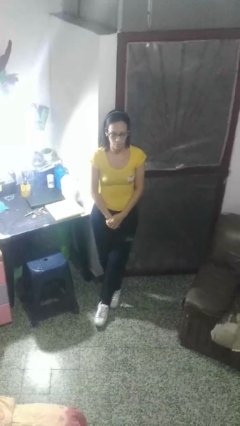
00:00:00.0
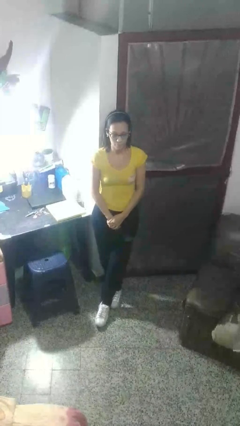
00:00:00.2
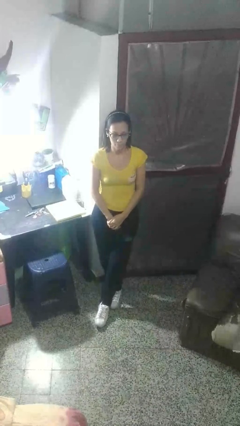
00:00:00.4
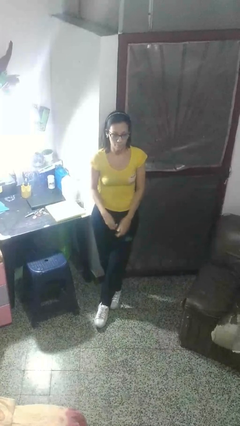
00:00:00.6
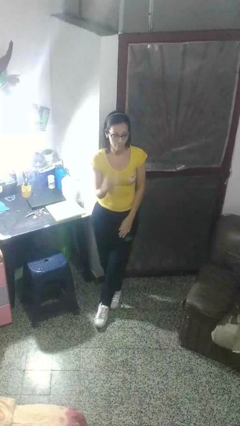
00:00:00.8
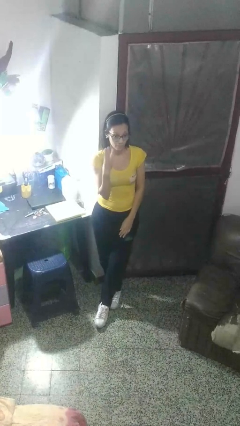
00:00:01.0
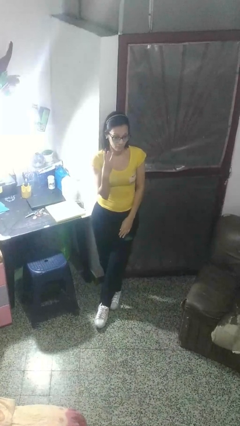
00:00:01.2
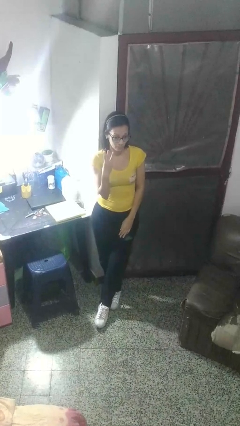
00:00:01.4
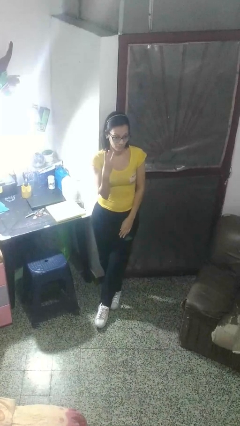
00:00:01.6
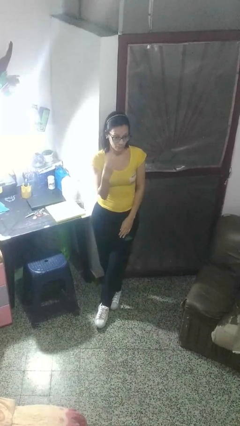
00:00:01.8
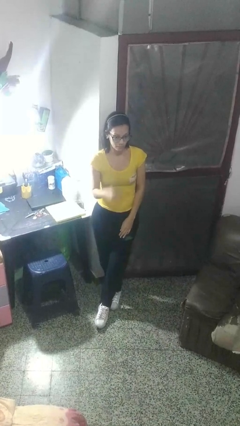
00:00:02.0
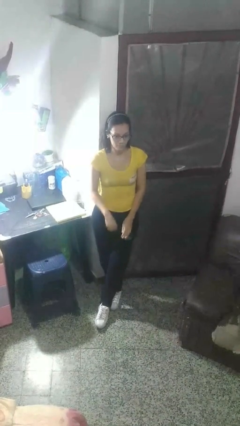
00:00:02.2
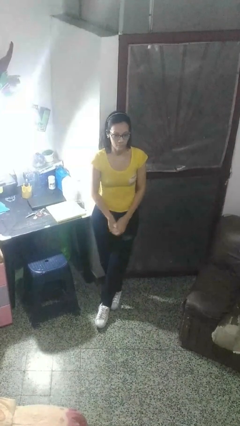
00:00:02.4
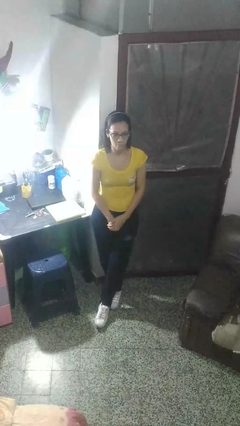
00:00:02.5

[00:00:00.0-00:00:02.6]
person gestures number three

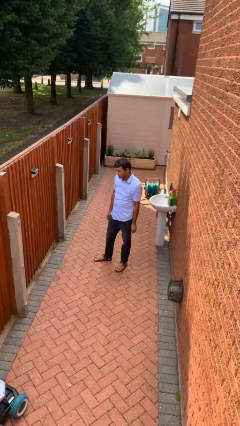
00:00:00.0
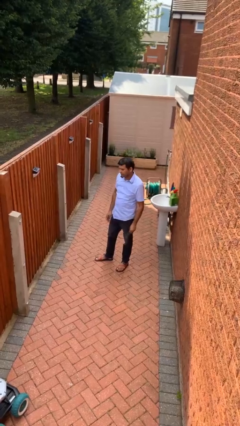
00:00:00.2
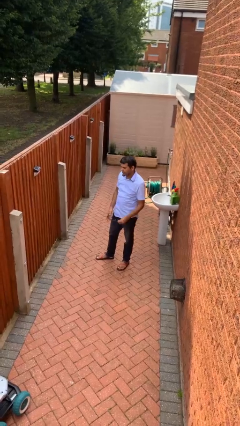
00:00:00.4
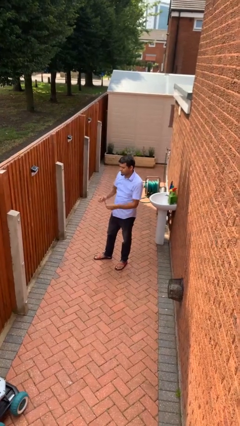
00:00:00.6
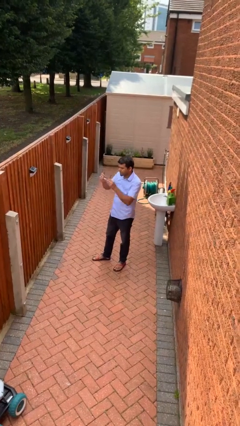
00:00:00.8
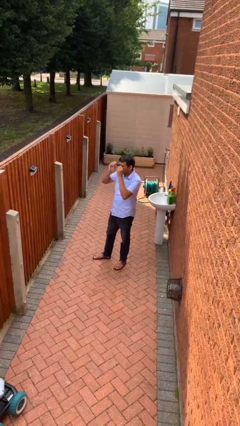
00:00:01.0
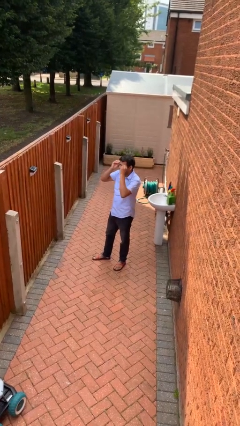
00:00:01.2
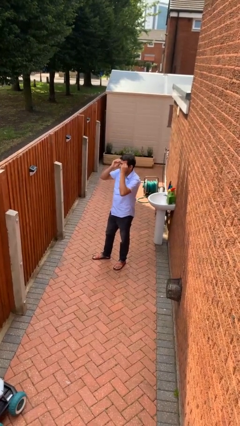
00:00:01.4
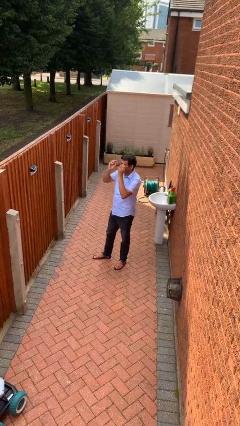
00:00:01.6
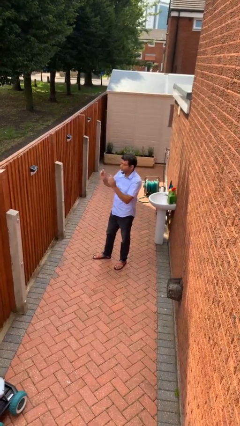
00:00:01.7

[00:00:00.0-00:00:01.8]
person puts on glasses

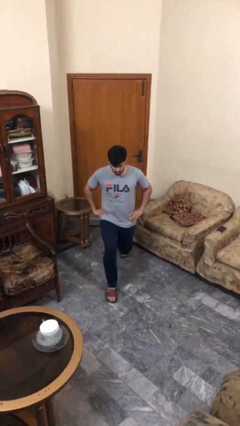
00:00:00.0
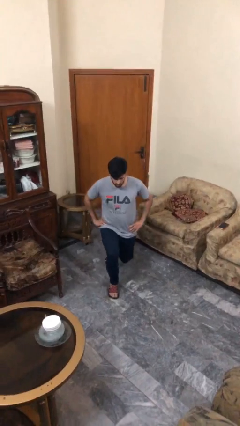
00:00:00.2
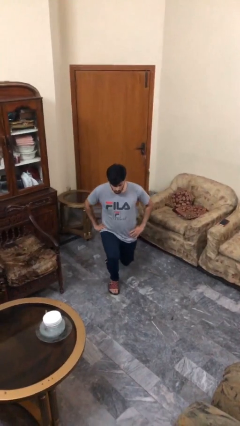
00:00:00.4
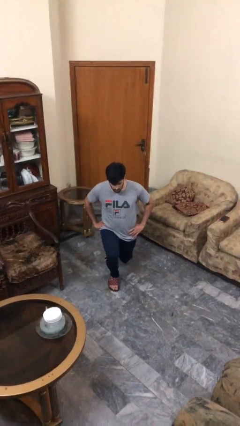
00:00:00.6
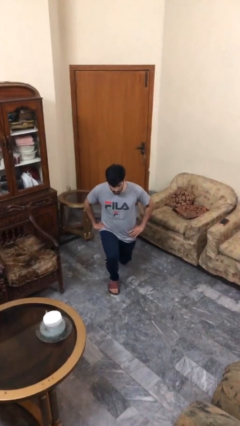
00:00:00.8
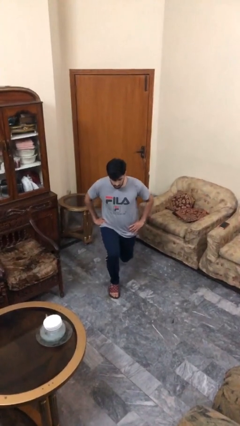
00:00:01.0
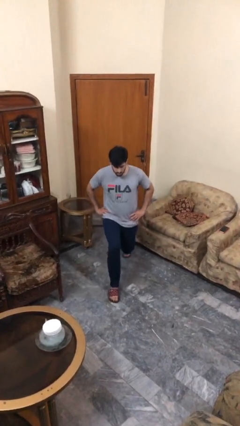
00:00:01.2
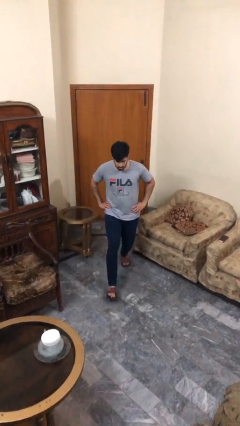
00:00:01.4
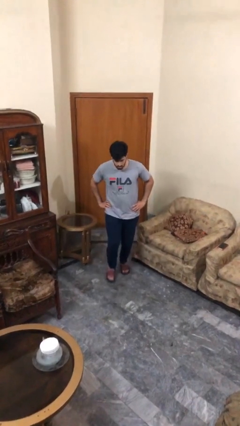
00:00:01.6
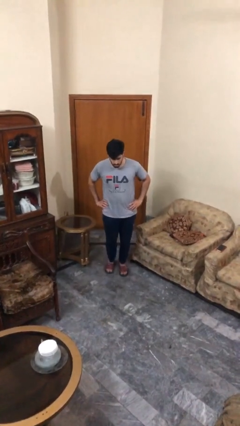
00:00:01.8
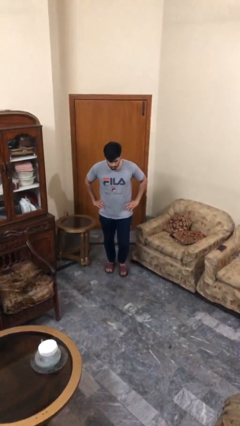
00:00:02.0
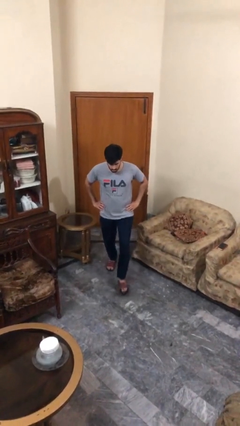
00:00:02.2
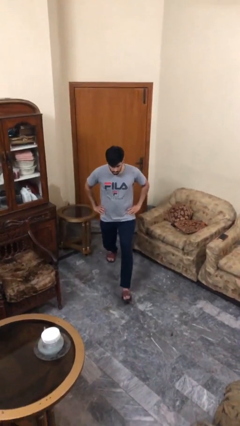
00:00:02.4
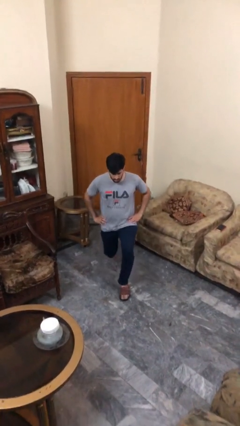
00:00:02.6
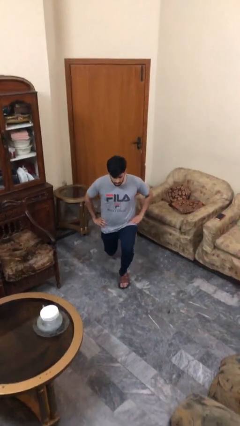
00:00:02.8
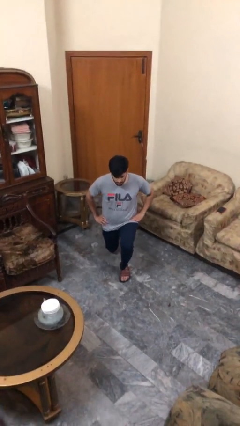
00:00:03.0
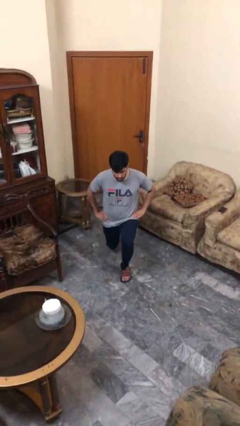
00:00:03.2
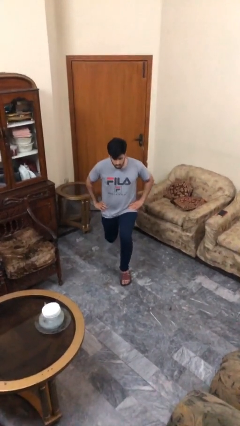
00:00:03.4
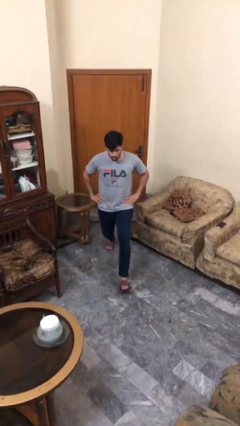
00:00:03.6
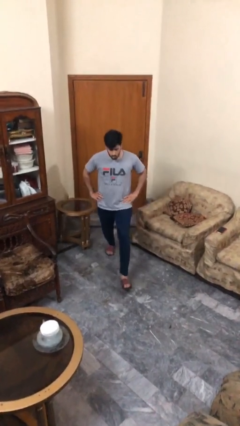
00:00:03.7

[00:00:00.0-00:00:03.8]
person exercises with lunges

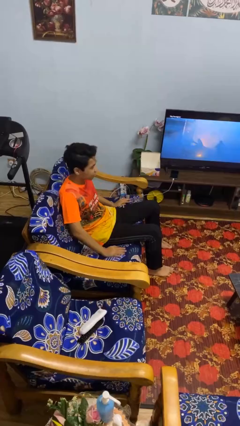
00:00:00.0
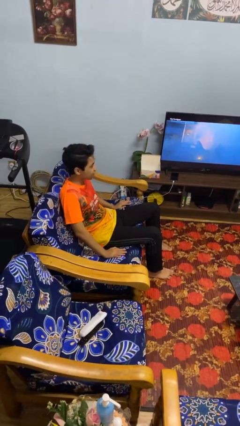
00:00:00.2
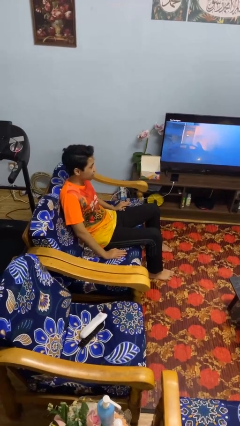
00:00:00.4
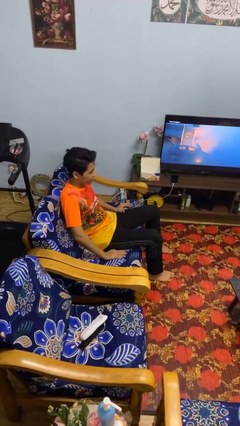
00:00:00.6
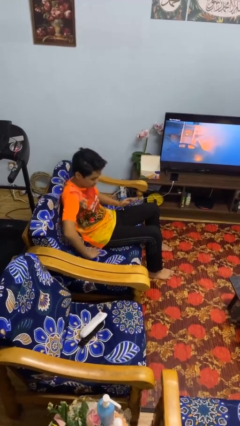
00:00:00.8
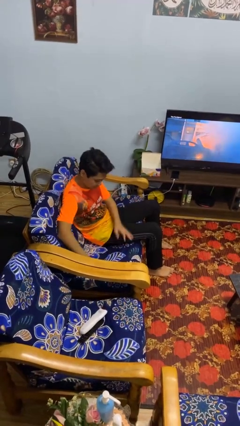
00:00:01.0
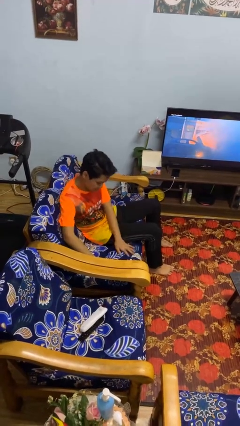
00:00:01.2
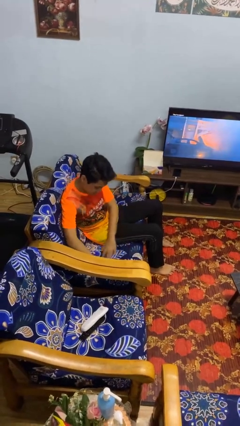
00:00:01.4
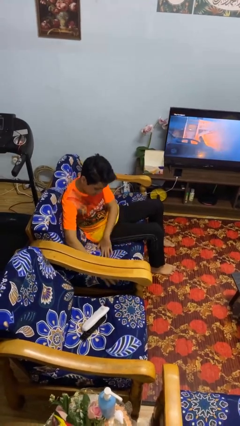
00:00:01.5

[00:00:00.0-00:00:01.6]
person searches in couch

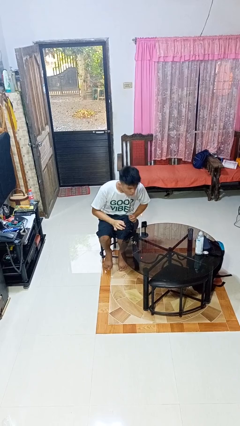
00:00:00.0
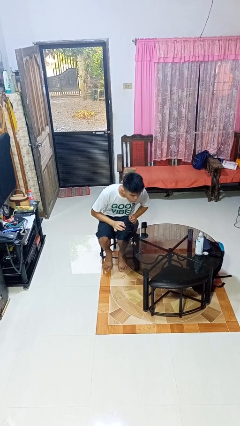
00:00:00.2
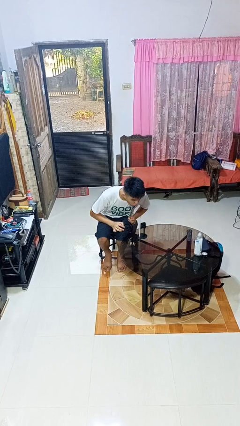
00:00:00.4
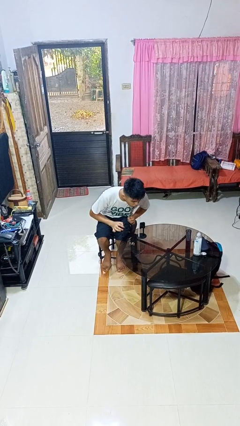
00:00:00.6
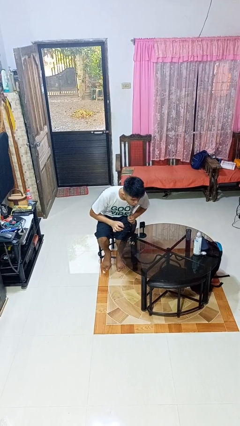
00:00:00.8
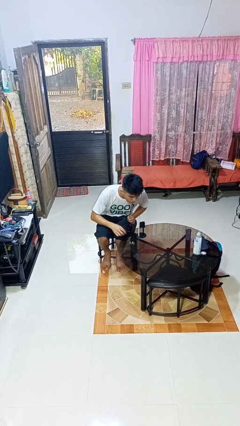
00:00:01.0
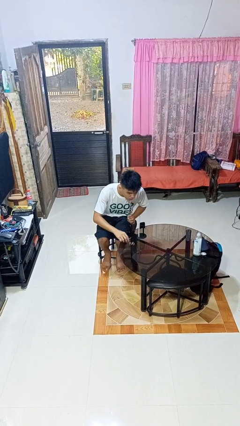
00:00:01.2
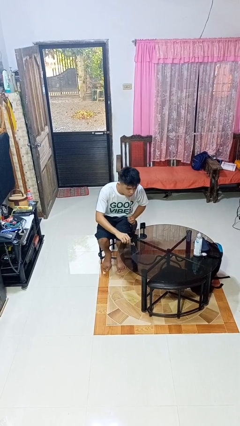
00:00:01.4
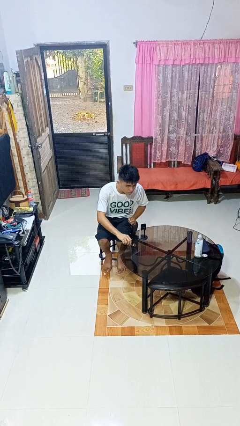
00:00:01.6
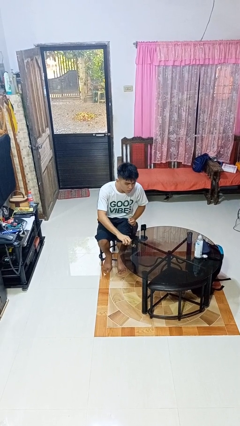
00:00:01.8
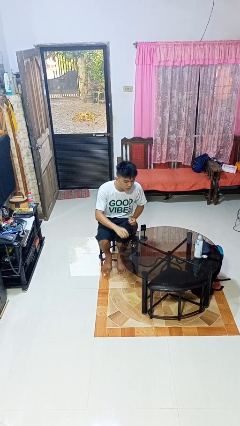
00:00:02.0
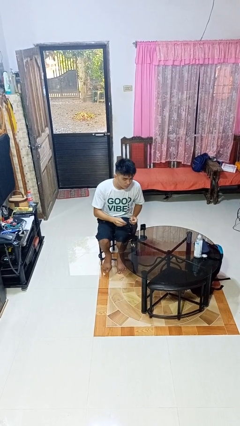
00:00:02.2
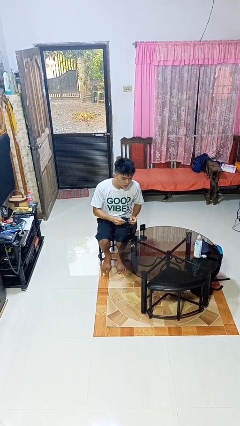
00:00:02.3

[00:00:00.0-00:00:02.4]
person extinguishes candle

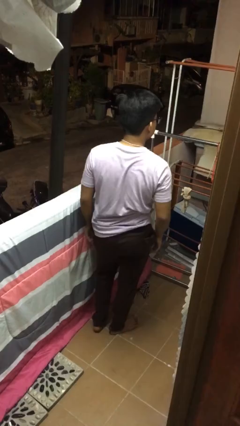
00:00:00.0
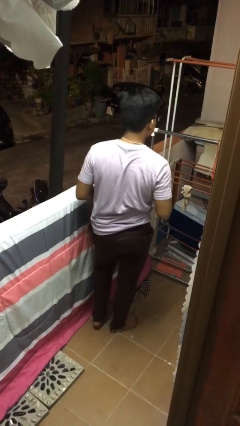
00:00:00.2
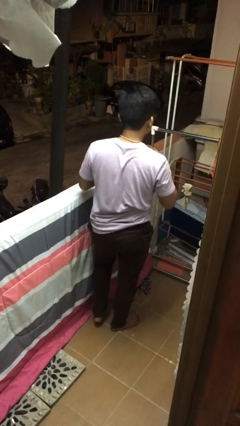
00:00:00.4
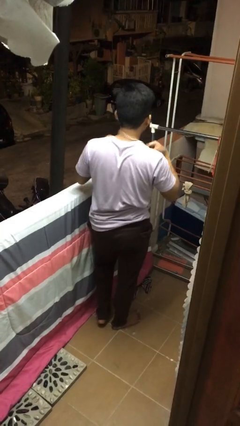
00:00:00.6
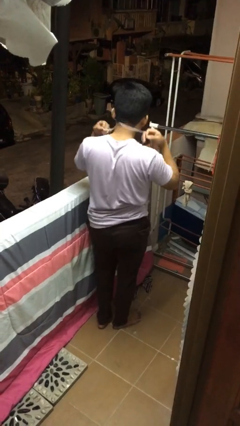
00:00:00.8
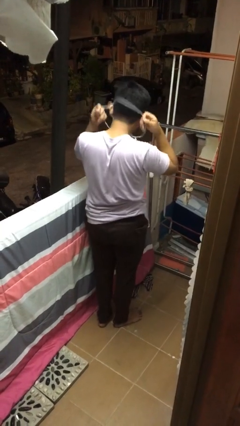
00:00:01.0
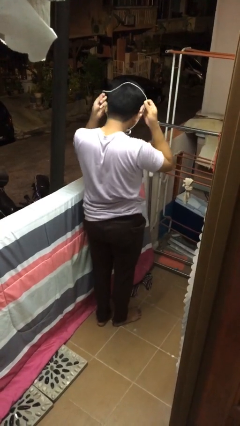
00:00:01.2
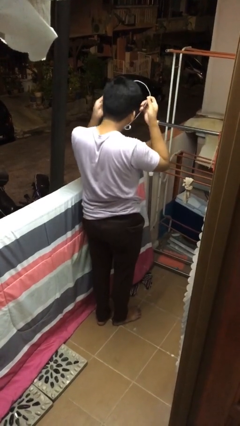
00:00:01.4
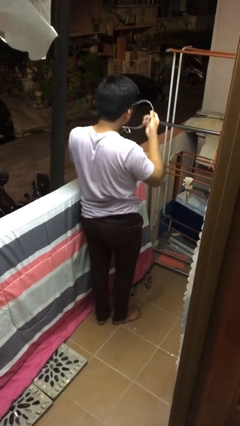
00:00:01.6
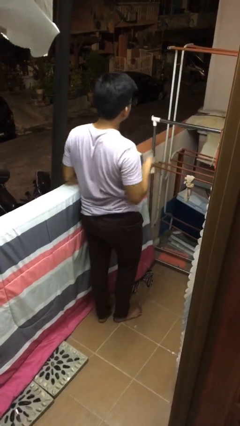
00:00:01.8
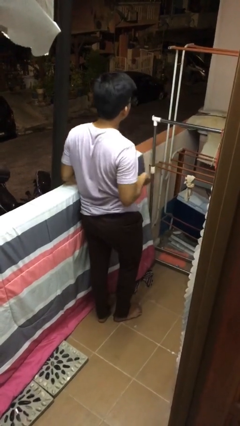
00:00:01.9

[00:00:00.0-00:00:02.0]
person takes off necklace

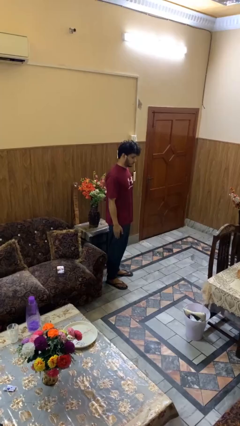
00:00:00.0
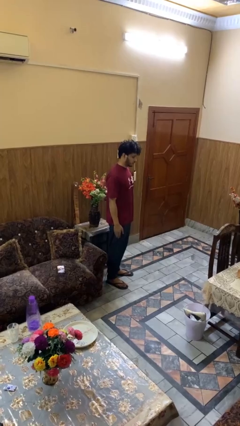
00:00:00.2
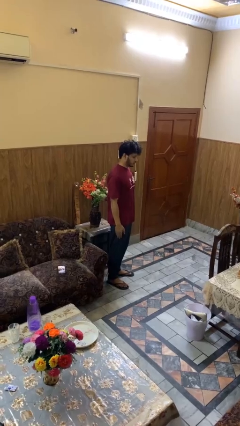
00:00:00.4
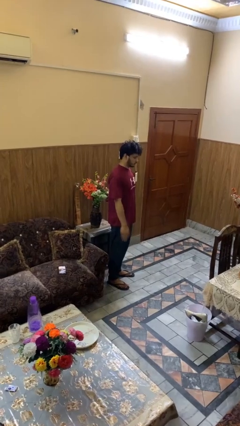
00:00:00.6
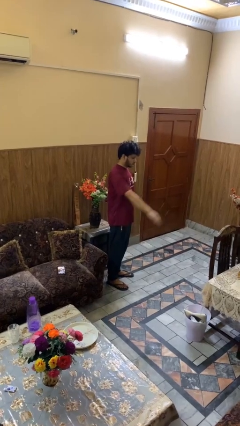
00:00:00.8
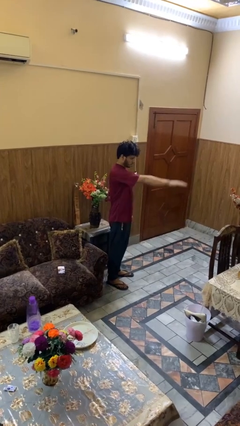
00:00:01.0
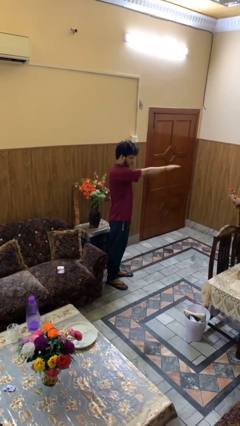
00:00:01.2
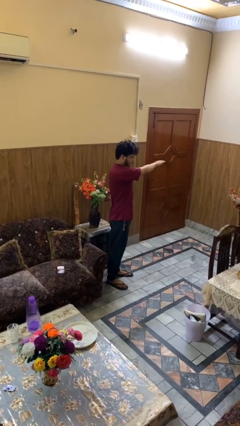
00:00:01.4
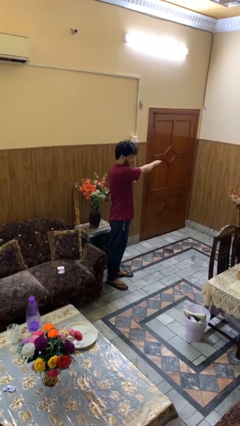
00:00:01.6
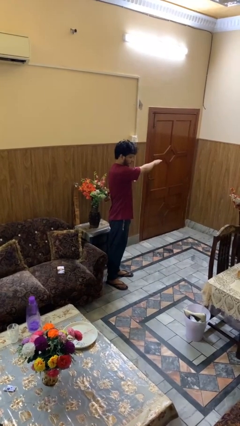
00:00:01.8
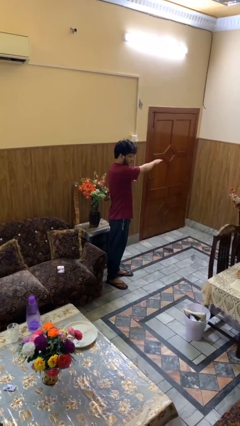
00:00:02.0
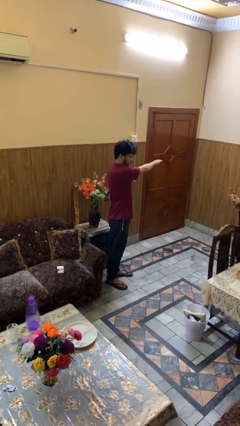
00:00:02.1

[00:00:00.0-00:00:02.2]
person gestures swipe left

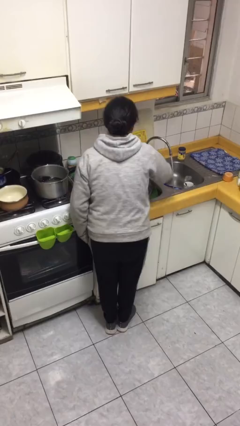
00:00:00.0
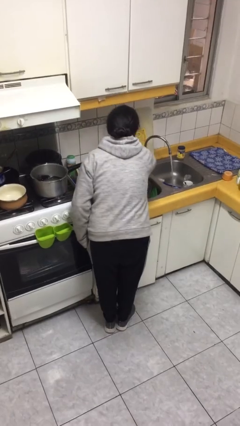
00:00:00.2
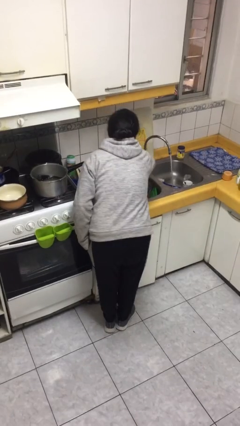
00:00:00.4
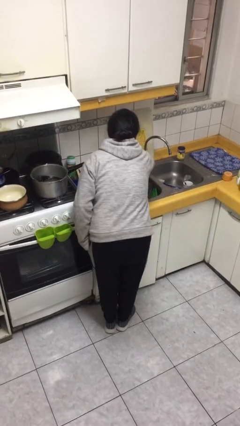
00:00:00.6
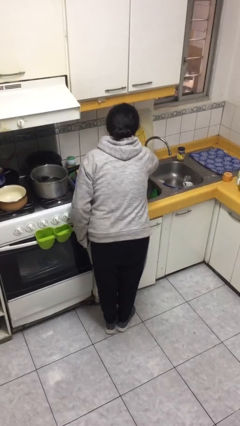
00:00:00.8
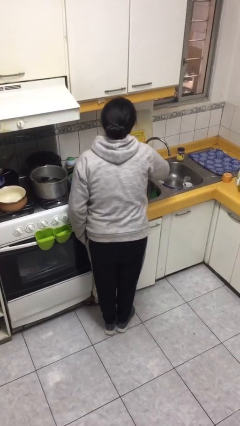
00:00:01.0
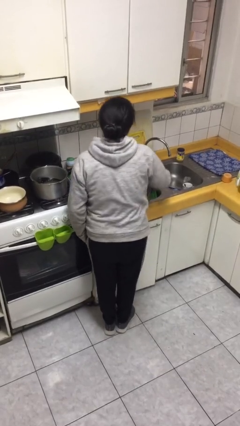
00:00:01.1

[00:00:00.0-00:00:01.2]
person turns off faucet
